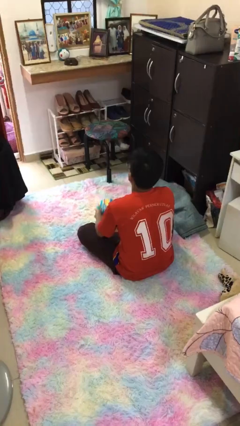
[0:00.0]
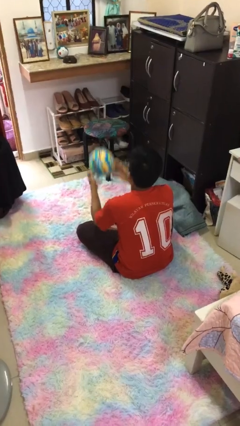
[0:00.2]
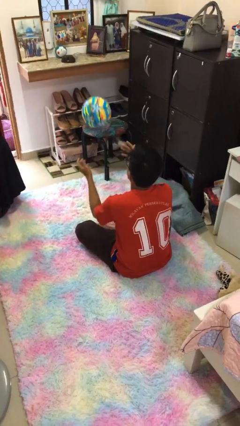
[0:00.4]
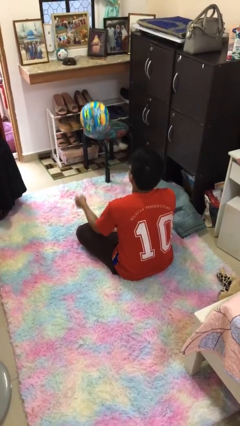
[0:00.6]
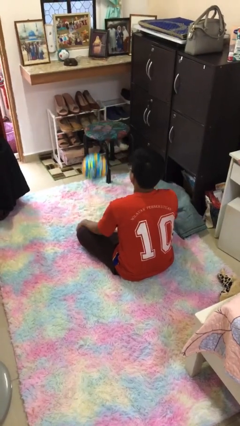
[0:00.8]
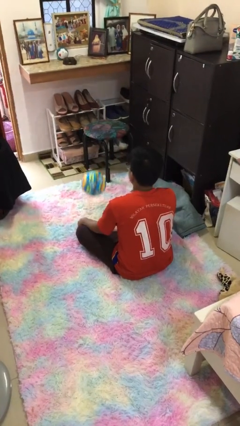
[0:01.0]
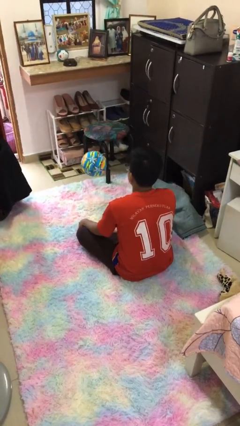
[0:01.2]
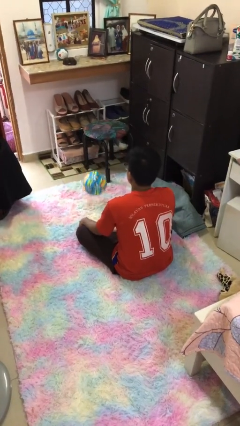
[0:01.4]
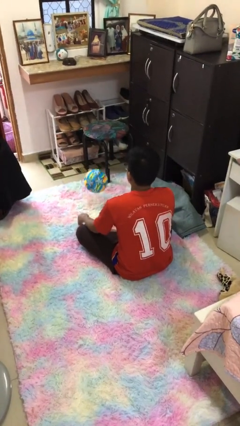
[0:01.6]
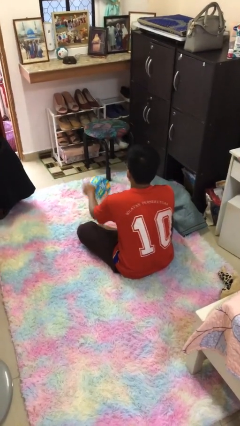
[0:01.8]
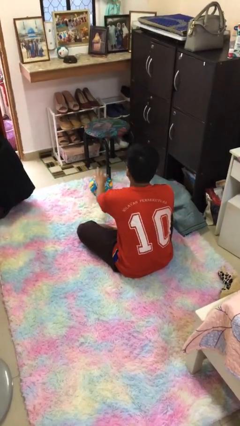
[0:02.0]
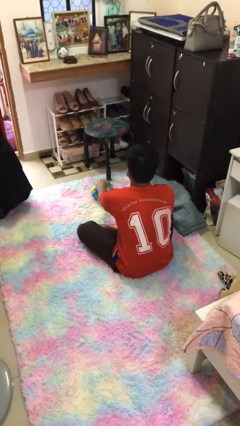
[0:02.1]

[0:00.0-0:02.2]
person bounces ball on floor

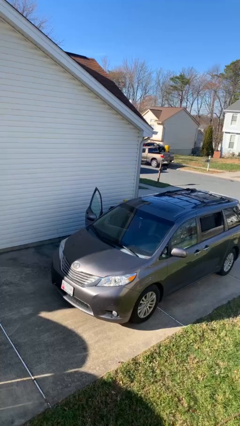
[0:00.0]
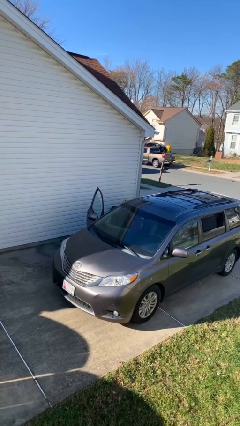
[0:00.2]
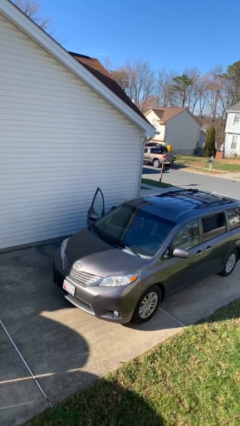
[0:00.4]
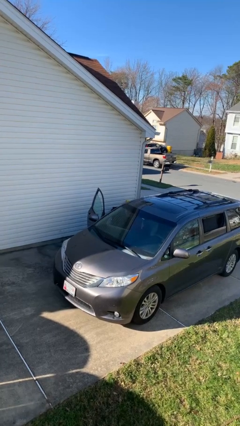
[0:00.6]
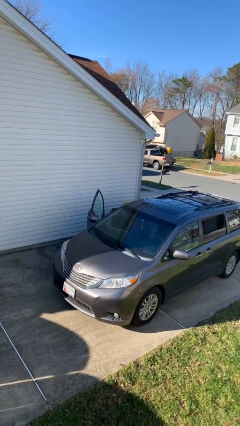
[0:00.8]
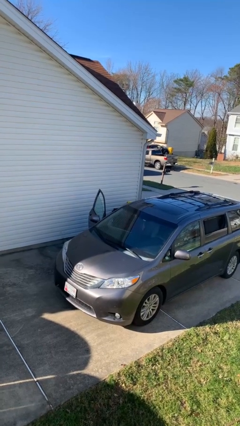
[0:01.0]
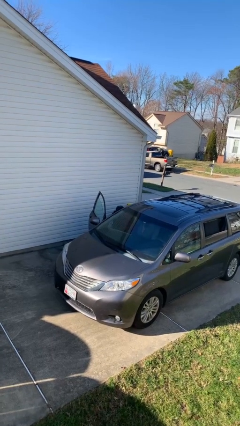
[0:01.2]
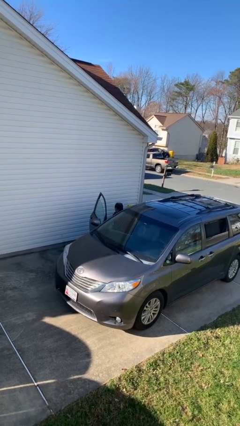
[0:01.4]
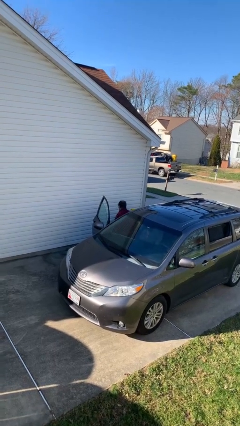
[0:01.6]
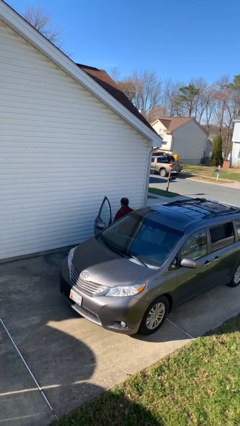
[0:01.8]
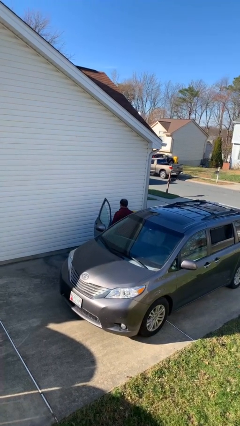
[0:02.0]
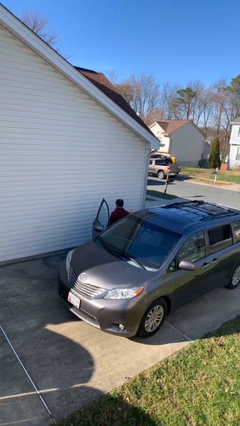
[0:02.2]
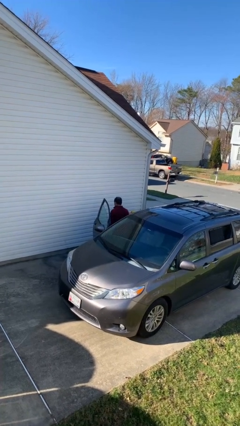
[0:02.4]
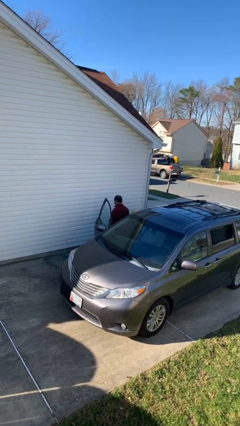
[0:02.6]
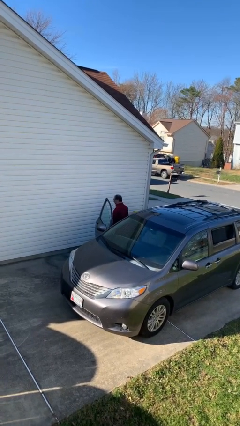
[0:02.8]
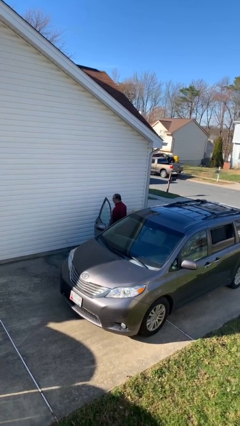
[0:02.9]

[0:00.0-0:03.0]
person exits car

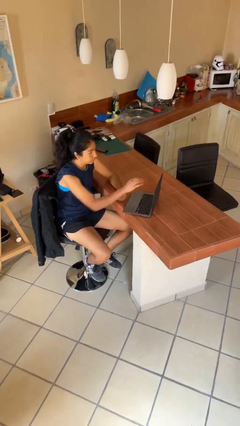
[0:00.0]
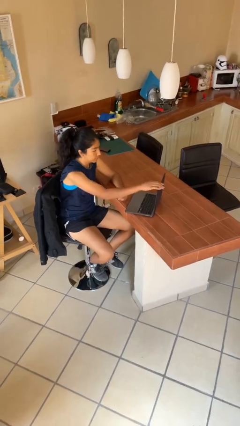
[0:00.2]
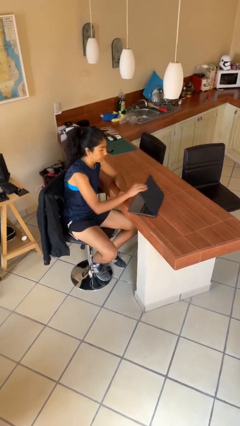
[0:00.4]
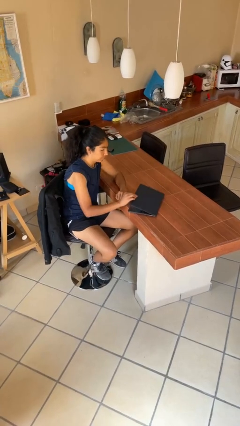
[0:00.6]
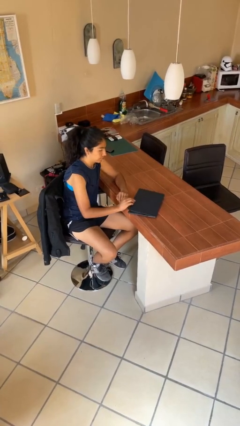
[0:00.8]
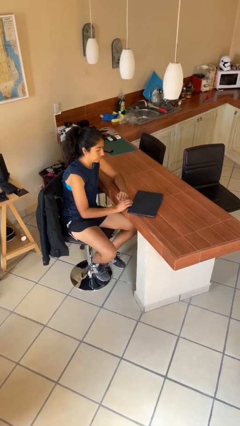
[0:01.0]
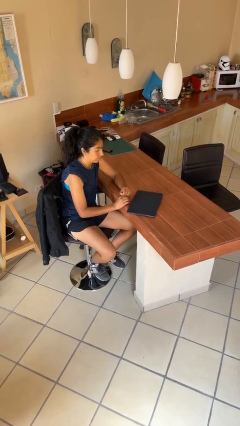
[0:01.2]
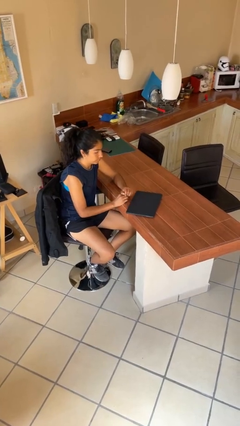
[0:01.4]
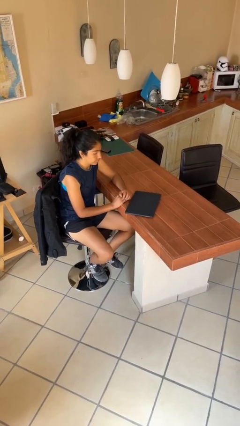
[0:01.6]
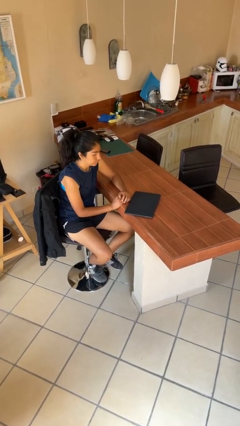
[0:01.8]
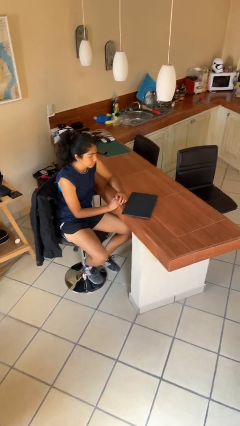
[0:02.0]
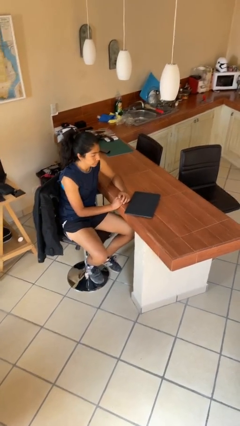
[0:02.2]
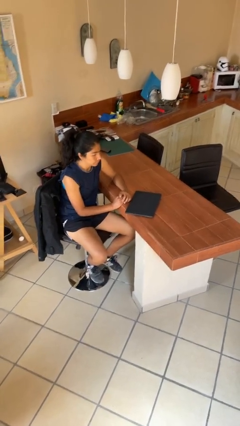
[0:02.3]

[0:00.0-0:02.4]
person closes laptop

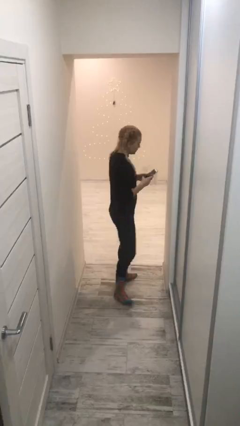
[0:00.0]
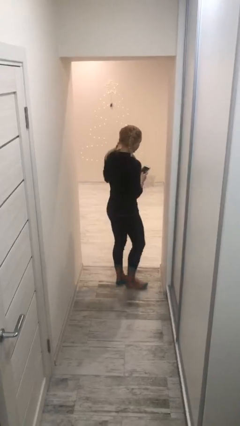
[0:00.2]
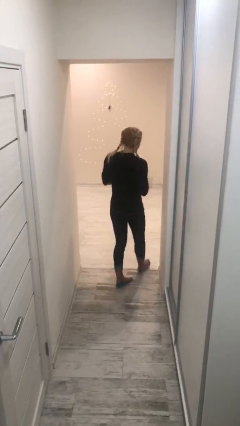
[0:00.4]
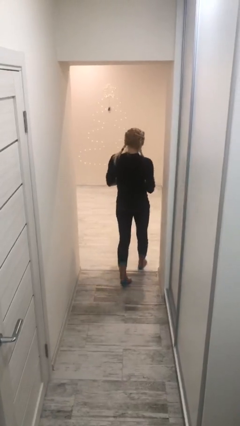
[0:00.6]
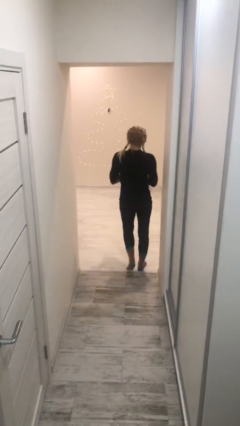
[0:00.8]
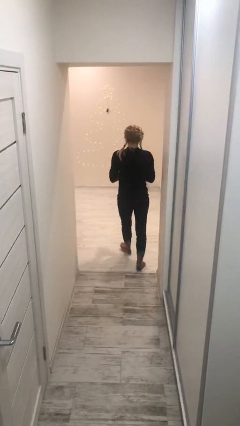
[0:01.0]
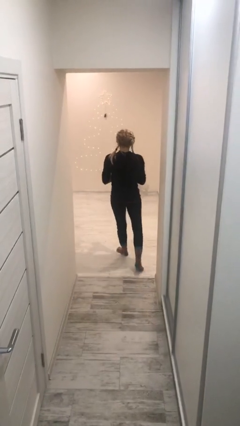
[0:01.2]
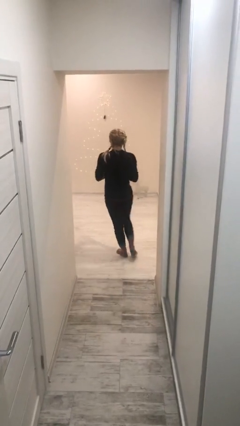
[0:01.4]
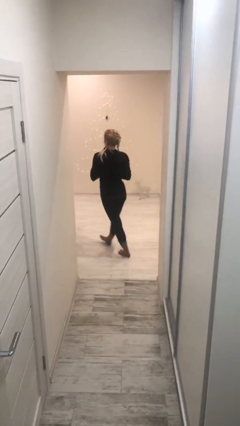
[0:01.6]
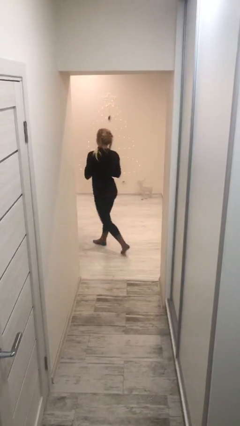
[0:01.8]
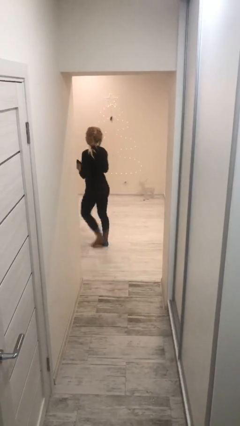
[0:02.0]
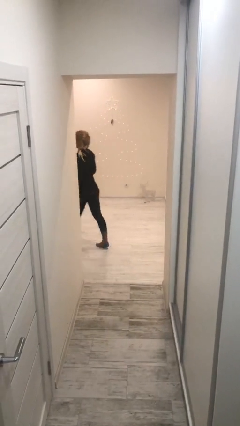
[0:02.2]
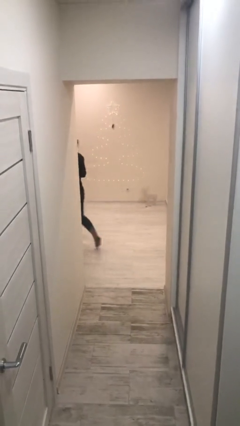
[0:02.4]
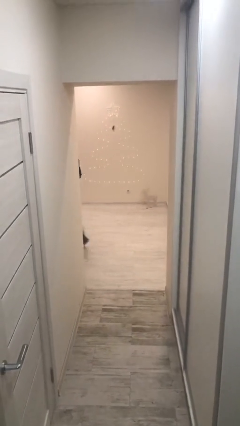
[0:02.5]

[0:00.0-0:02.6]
person exits scene through structure

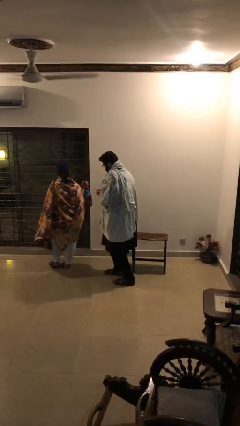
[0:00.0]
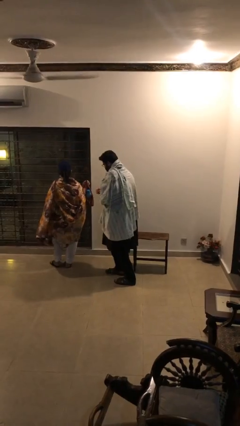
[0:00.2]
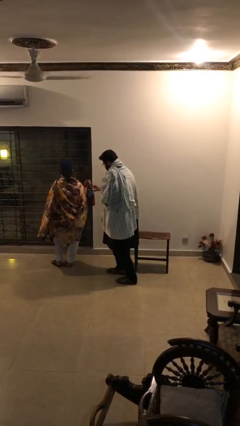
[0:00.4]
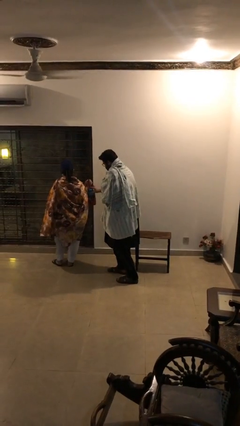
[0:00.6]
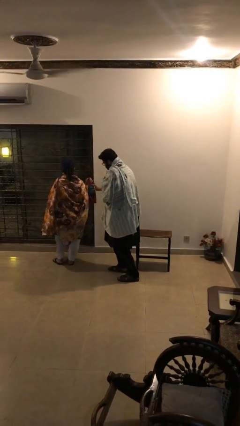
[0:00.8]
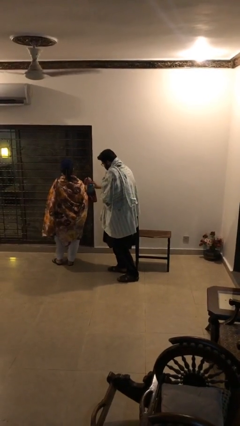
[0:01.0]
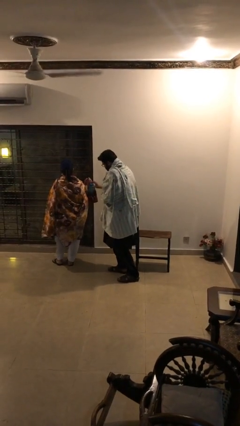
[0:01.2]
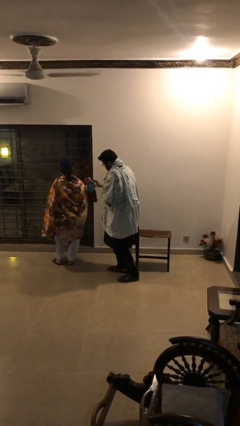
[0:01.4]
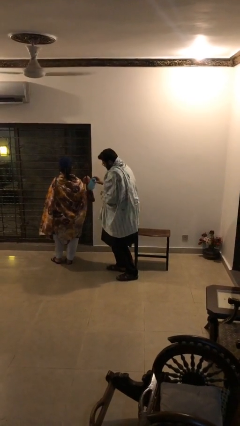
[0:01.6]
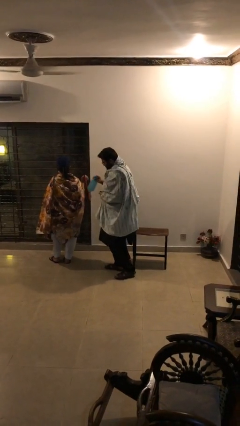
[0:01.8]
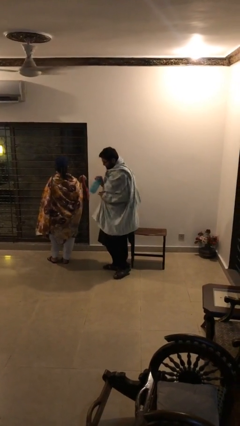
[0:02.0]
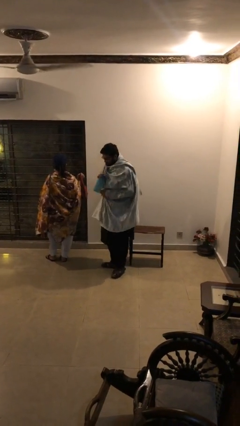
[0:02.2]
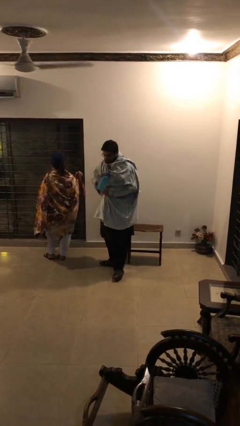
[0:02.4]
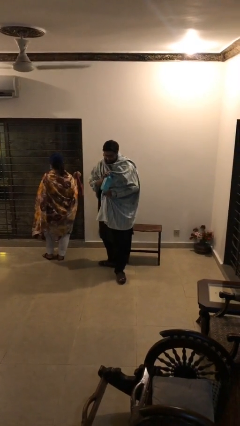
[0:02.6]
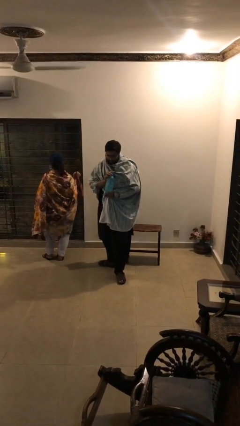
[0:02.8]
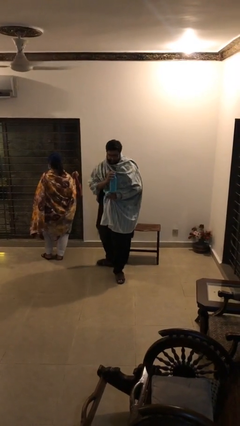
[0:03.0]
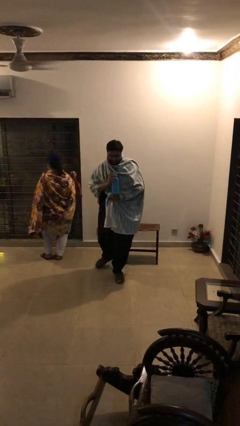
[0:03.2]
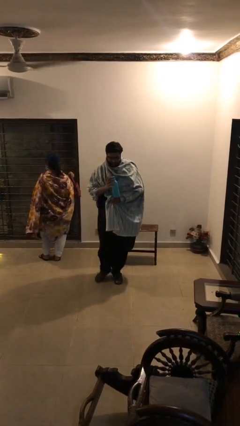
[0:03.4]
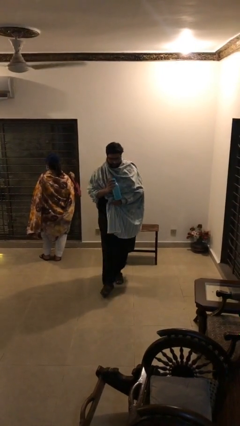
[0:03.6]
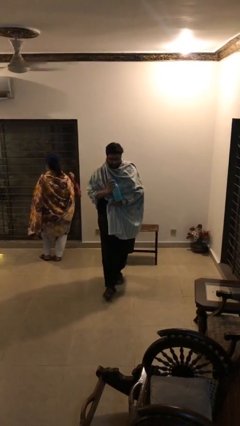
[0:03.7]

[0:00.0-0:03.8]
person steals object from person

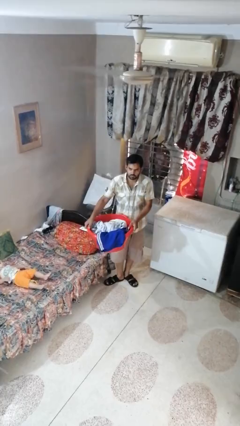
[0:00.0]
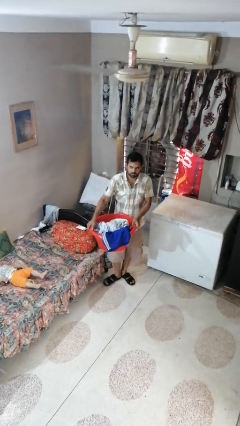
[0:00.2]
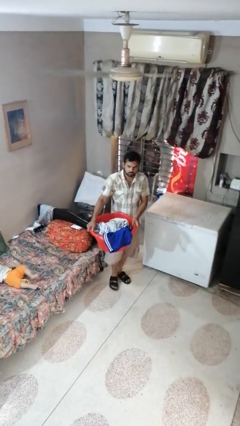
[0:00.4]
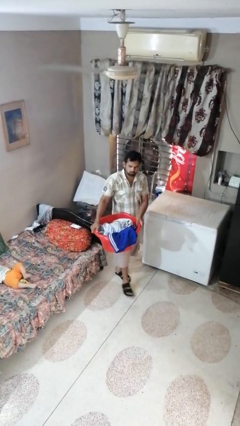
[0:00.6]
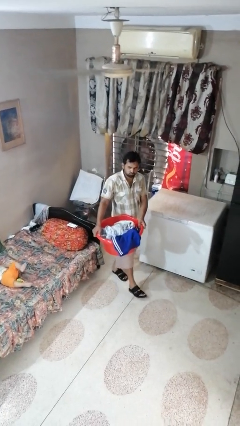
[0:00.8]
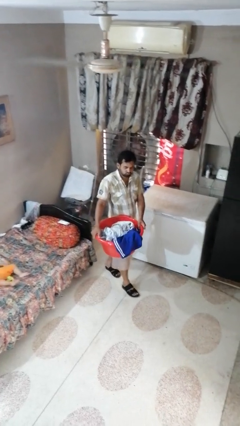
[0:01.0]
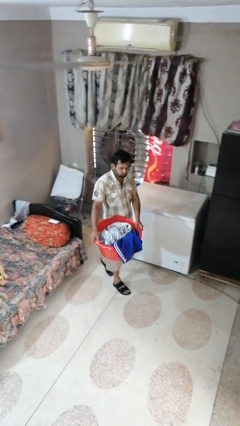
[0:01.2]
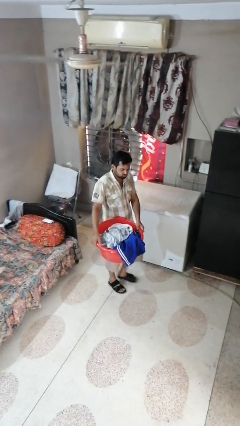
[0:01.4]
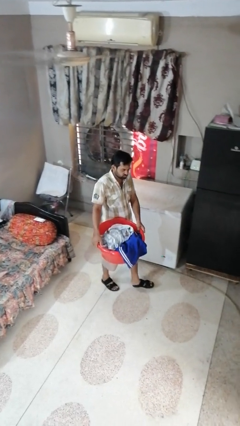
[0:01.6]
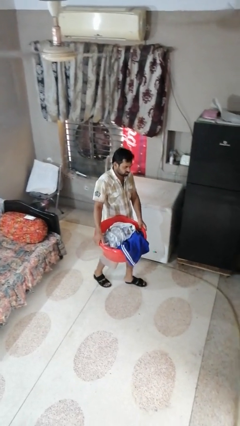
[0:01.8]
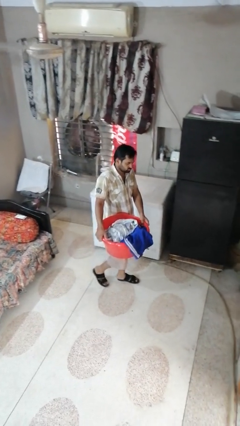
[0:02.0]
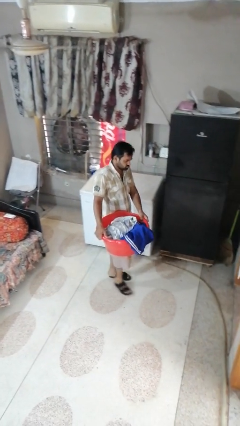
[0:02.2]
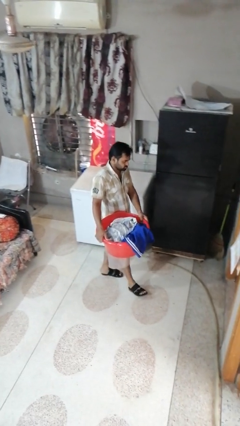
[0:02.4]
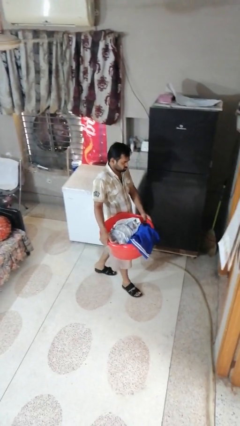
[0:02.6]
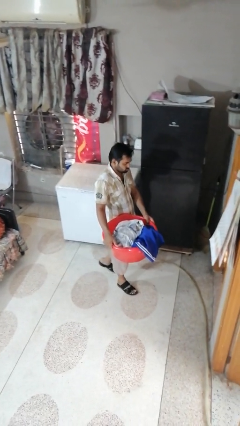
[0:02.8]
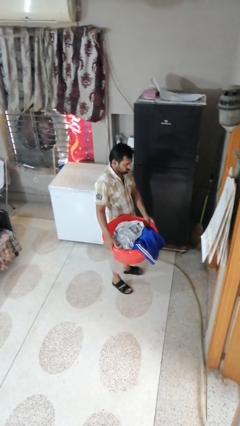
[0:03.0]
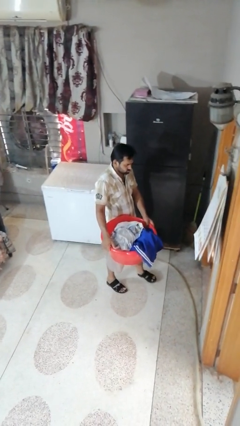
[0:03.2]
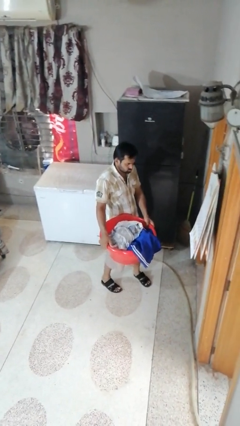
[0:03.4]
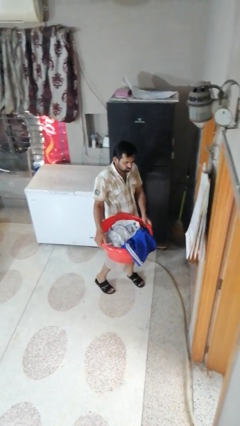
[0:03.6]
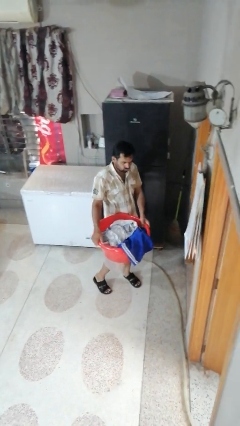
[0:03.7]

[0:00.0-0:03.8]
person carries laundry basket

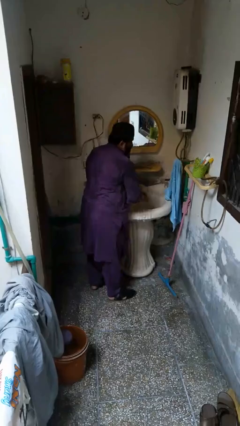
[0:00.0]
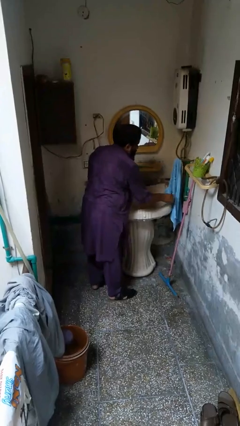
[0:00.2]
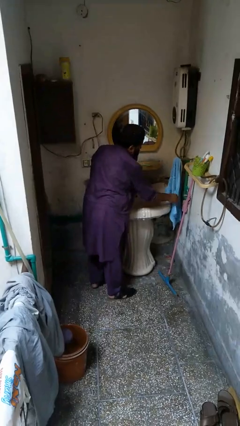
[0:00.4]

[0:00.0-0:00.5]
person dries hands with towel
